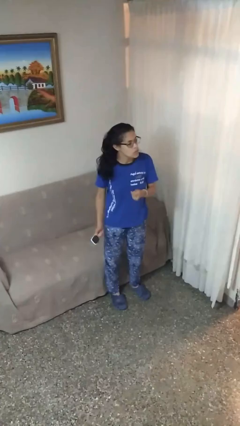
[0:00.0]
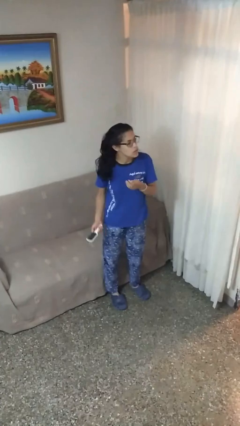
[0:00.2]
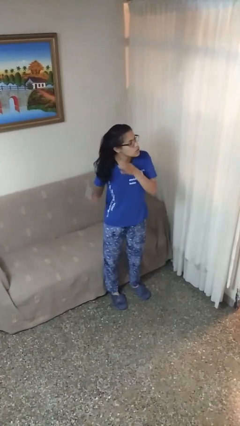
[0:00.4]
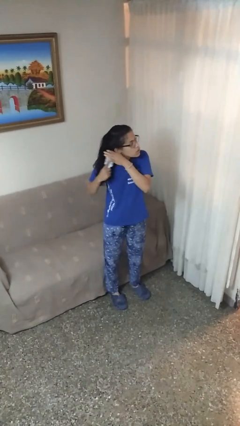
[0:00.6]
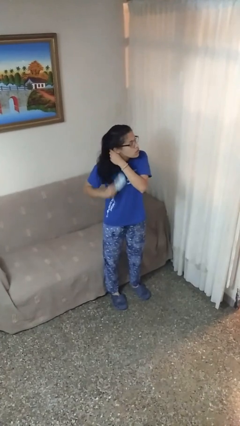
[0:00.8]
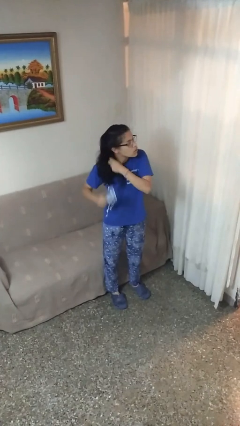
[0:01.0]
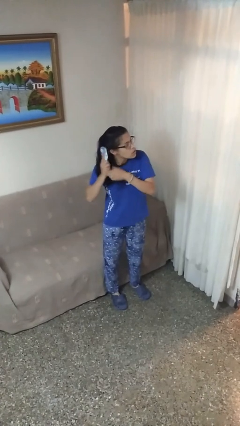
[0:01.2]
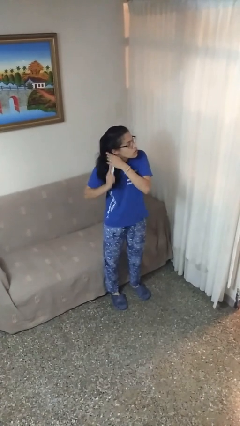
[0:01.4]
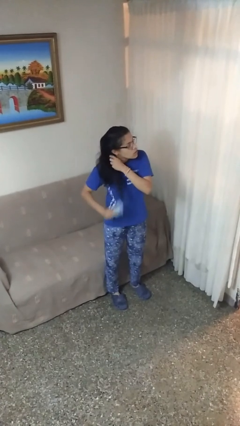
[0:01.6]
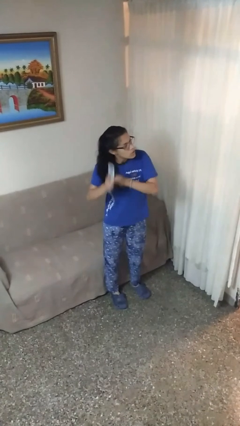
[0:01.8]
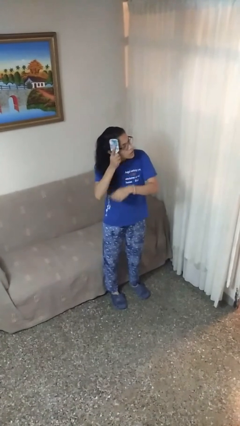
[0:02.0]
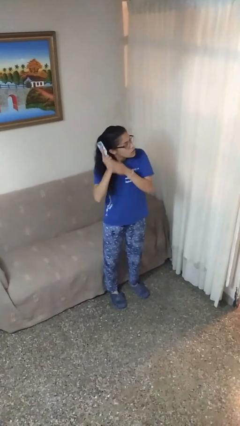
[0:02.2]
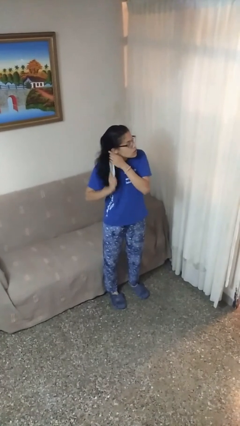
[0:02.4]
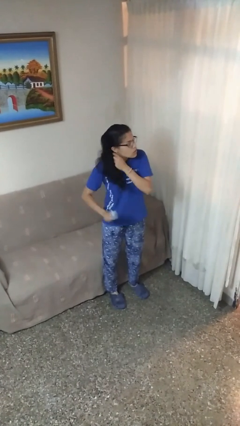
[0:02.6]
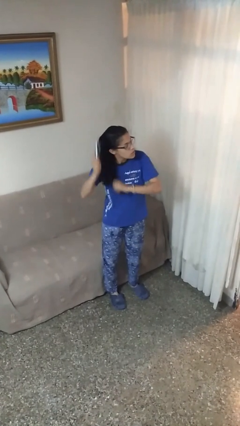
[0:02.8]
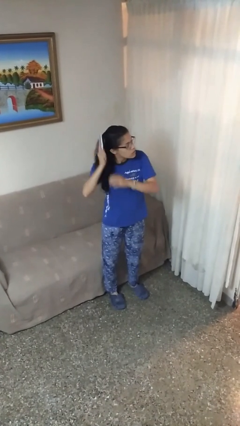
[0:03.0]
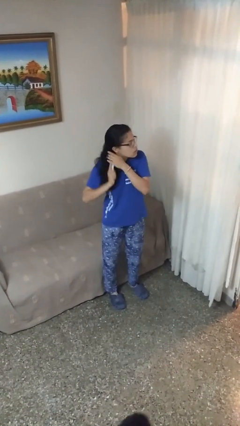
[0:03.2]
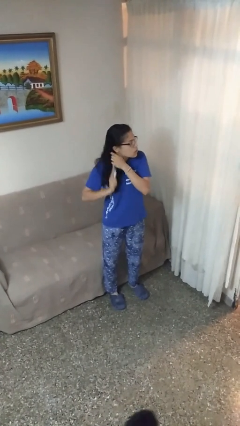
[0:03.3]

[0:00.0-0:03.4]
person brushes hair

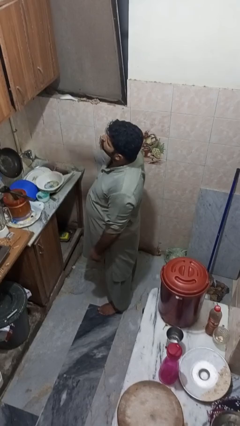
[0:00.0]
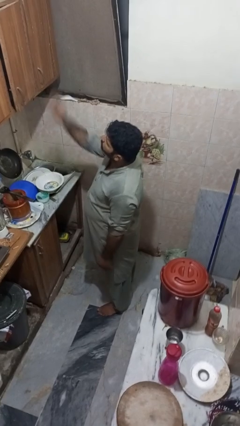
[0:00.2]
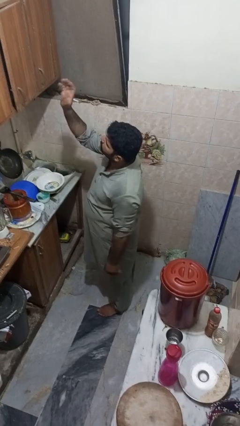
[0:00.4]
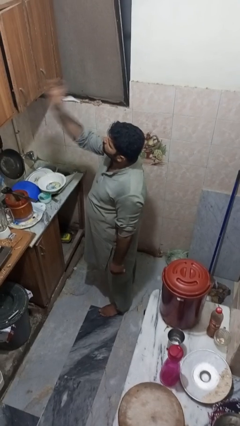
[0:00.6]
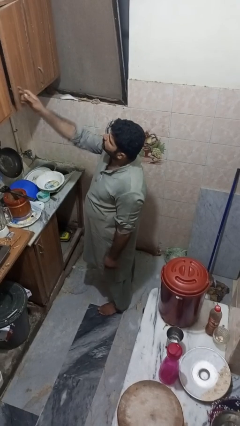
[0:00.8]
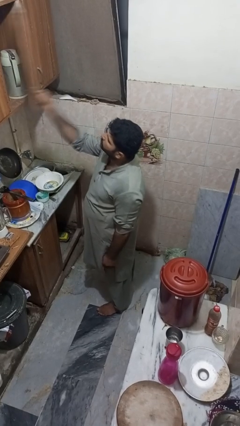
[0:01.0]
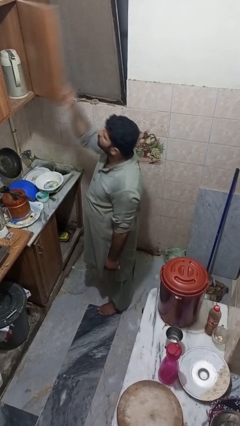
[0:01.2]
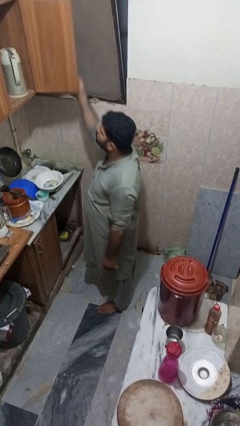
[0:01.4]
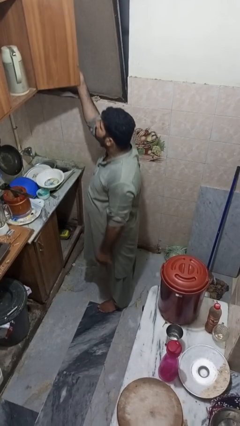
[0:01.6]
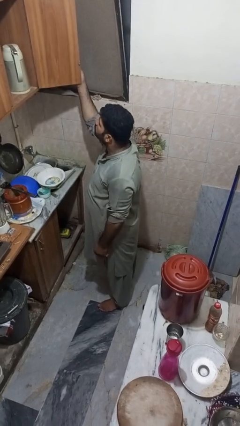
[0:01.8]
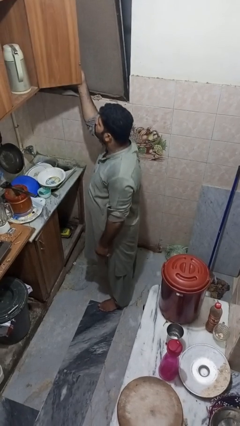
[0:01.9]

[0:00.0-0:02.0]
person opens cabinet

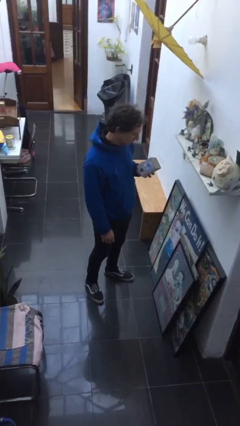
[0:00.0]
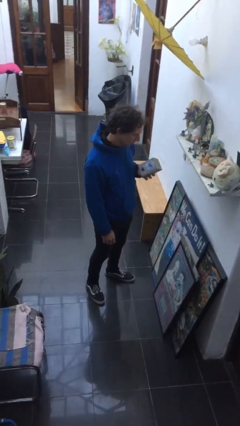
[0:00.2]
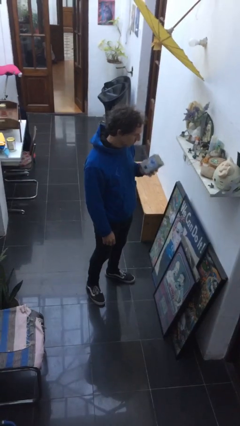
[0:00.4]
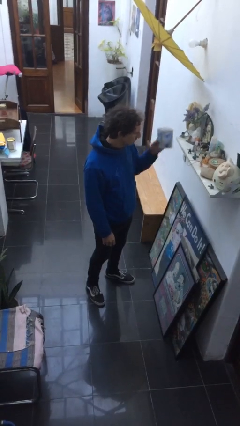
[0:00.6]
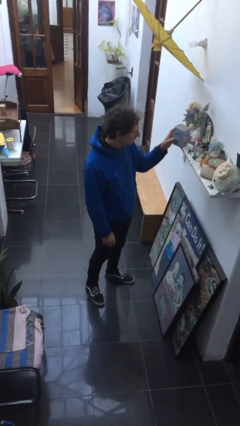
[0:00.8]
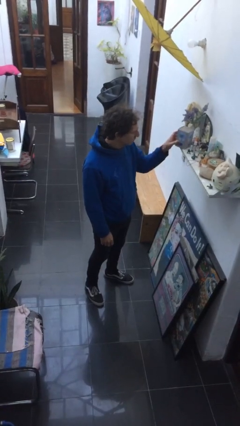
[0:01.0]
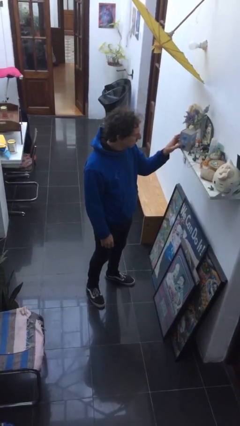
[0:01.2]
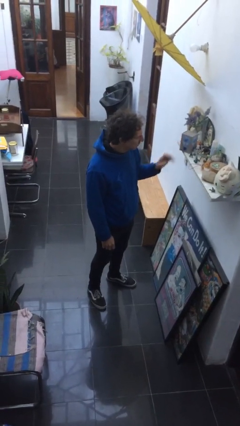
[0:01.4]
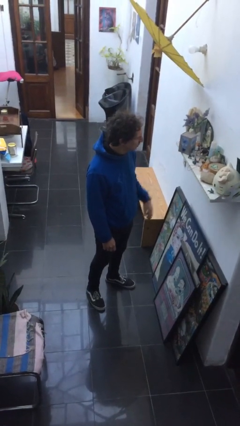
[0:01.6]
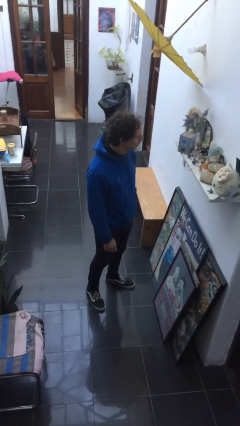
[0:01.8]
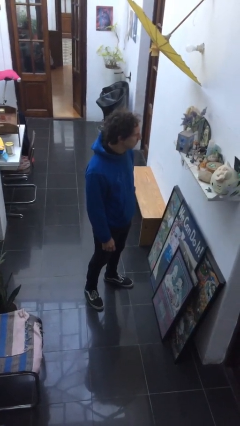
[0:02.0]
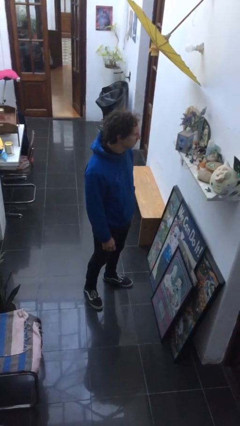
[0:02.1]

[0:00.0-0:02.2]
person puts down object on countertop

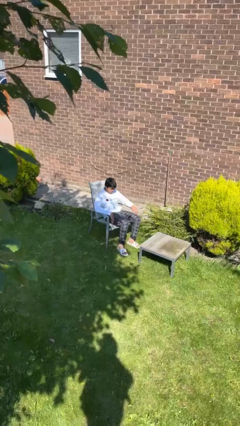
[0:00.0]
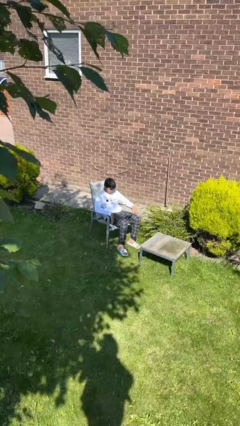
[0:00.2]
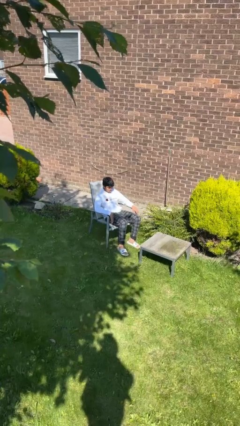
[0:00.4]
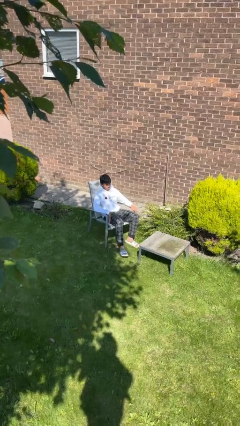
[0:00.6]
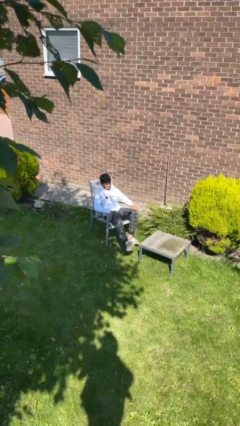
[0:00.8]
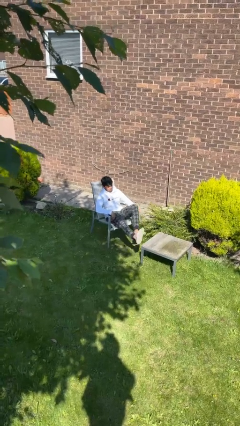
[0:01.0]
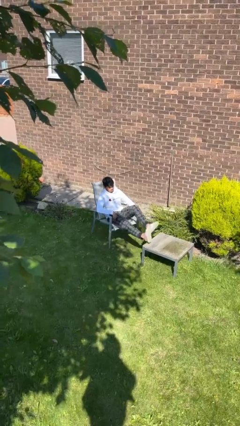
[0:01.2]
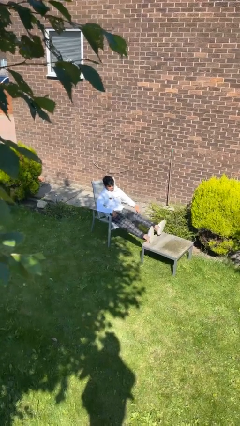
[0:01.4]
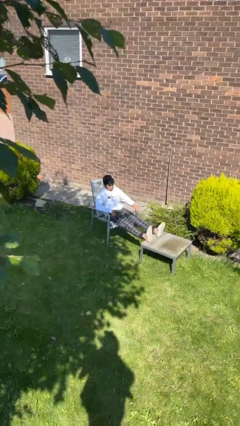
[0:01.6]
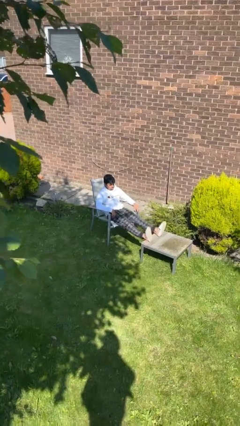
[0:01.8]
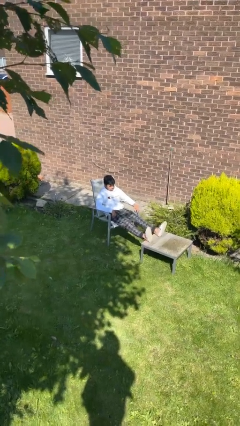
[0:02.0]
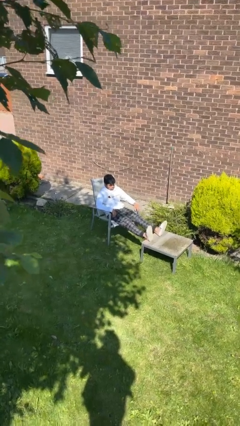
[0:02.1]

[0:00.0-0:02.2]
person puts feet up

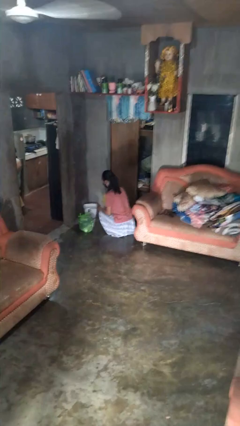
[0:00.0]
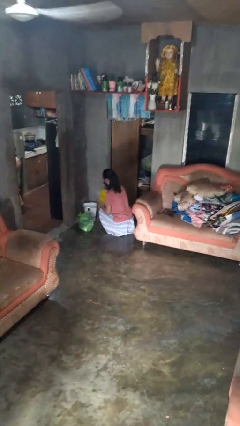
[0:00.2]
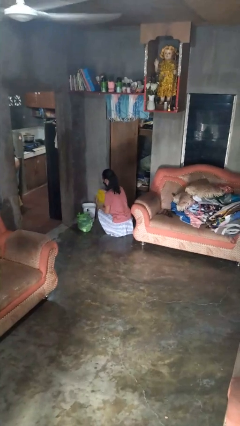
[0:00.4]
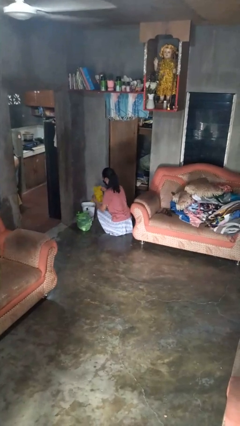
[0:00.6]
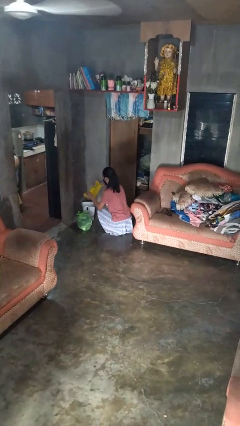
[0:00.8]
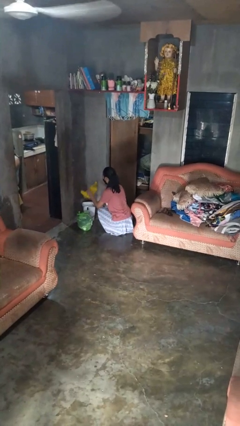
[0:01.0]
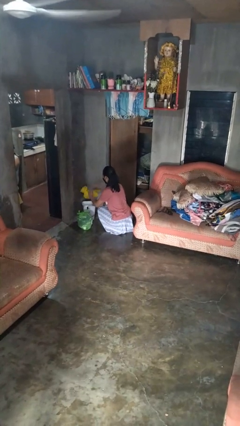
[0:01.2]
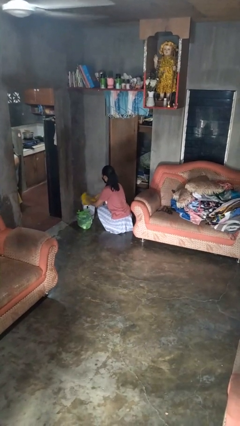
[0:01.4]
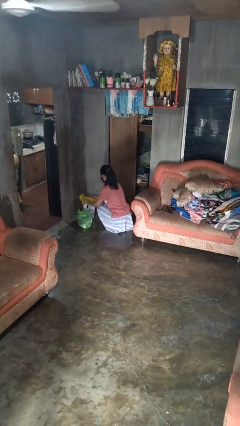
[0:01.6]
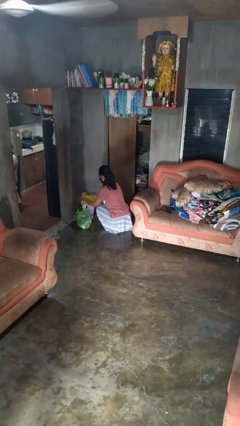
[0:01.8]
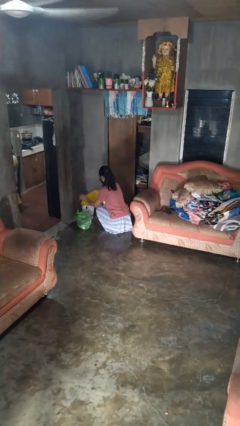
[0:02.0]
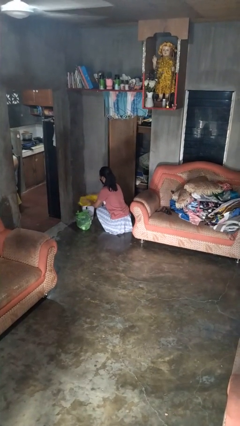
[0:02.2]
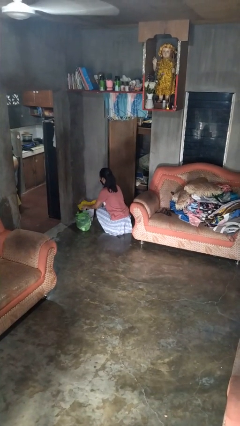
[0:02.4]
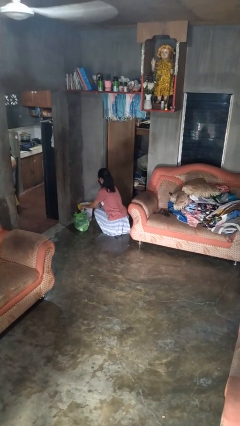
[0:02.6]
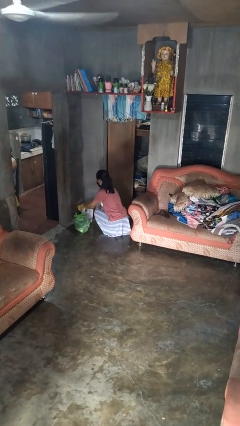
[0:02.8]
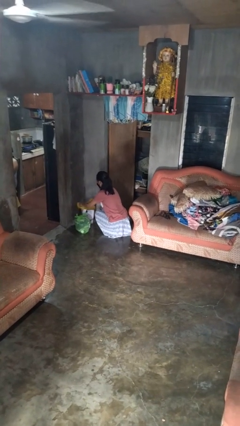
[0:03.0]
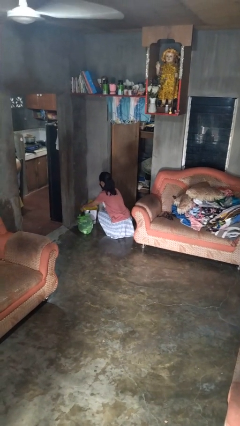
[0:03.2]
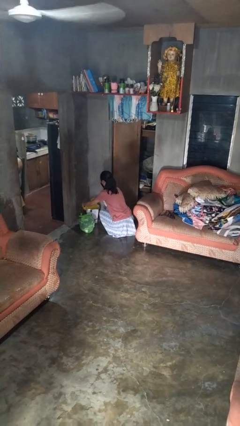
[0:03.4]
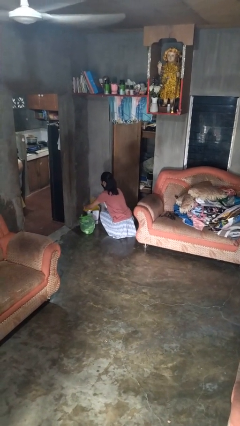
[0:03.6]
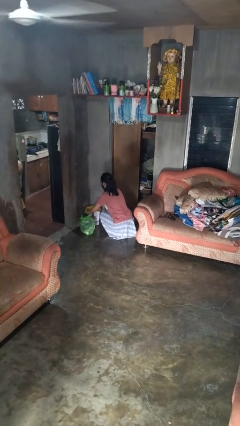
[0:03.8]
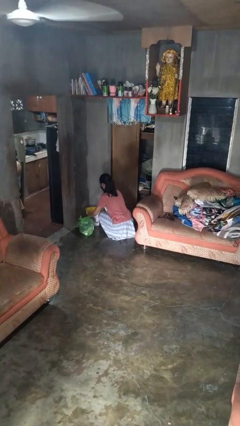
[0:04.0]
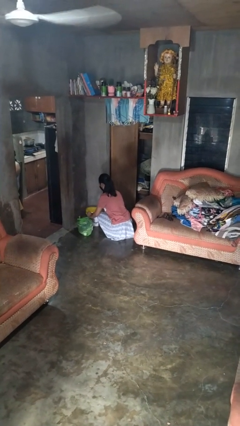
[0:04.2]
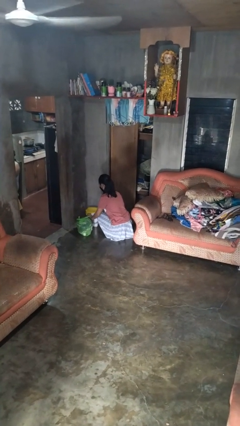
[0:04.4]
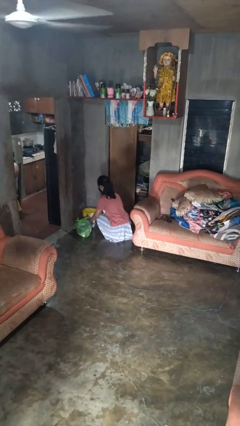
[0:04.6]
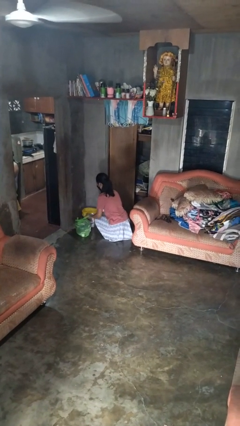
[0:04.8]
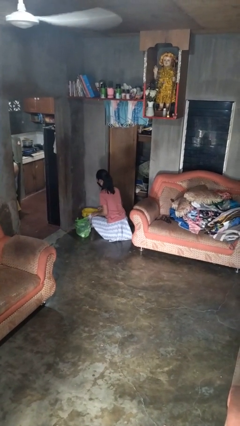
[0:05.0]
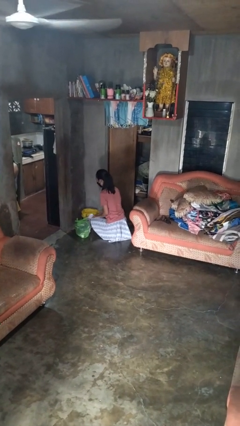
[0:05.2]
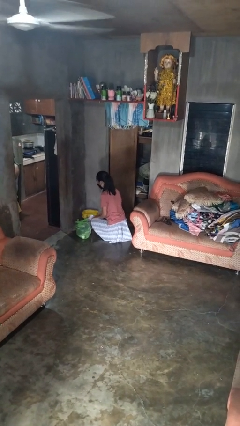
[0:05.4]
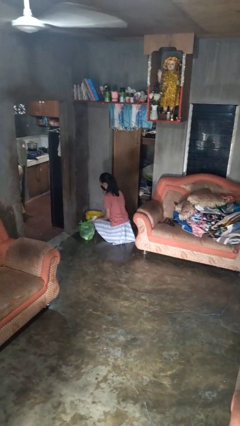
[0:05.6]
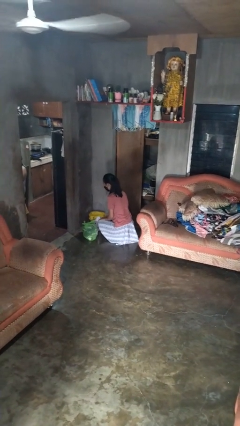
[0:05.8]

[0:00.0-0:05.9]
person inserts trashbag into trashcan

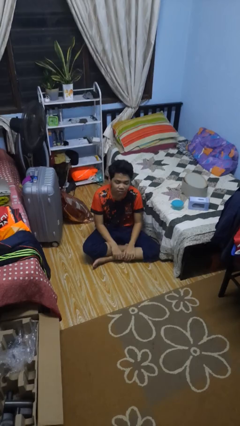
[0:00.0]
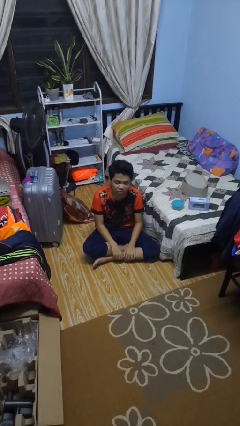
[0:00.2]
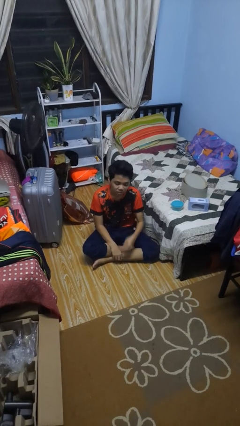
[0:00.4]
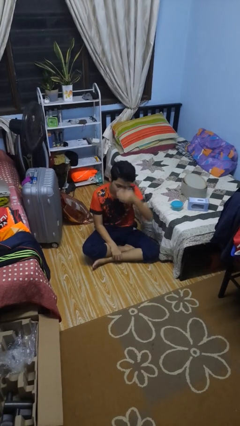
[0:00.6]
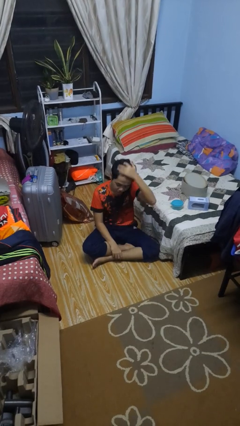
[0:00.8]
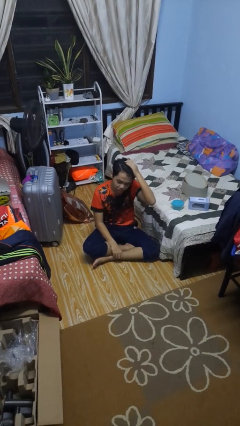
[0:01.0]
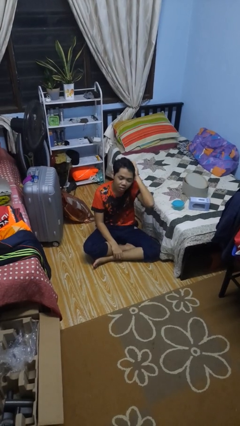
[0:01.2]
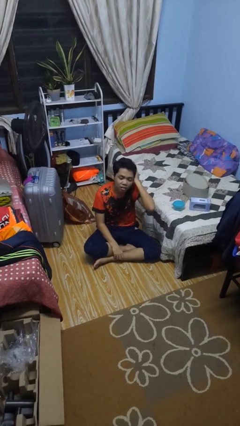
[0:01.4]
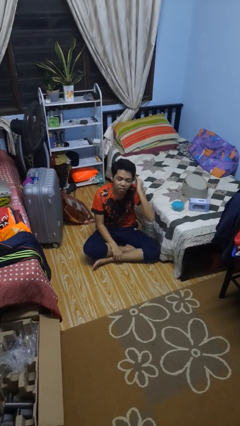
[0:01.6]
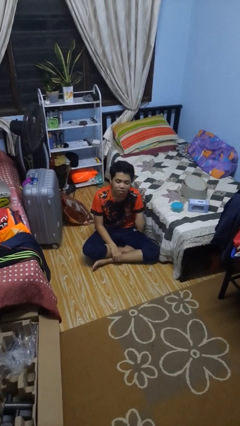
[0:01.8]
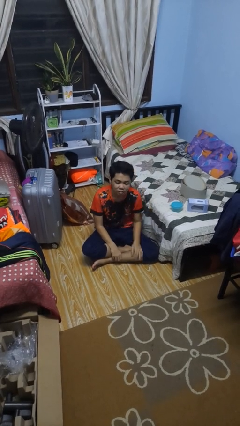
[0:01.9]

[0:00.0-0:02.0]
person strokes hair
